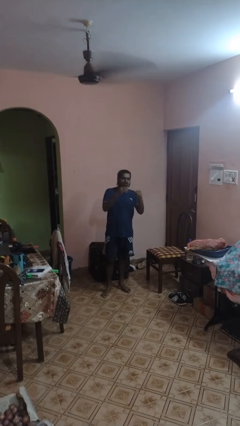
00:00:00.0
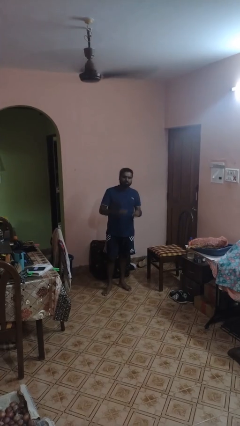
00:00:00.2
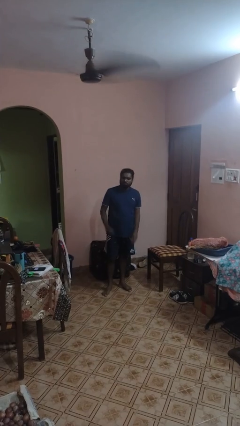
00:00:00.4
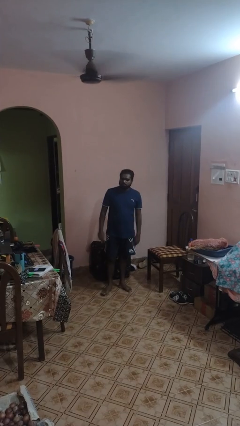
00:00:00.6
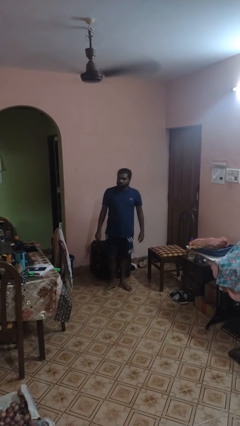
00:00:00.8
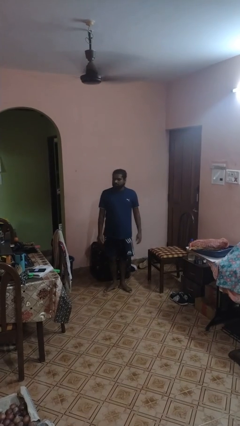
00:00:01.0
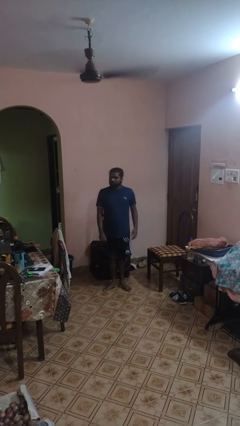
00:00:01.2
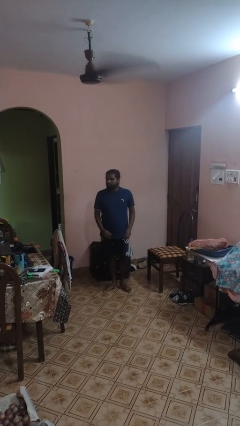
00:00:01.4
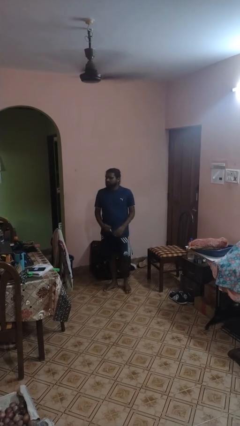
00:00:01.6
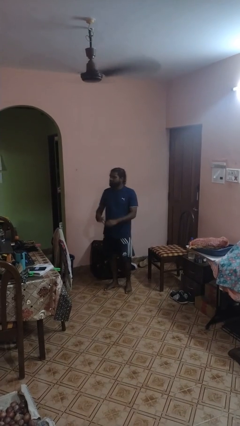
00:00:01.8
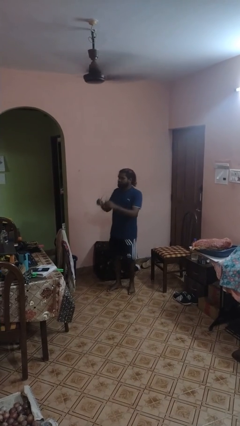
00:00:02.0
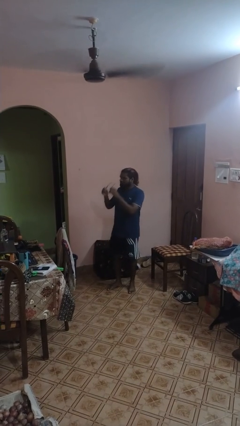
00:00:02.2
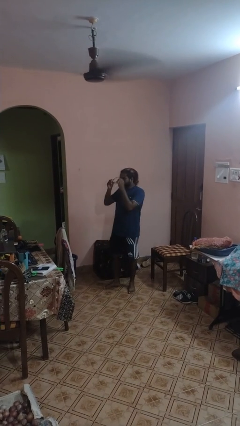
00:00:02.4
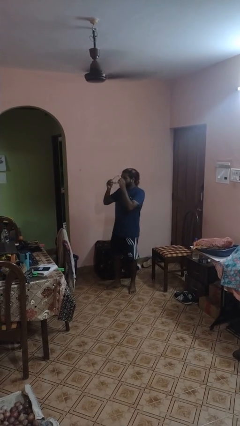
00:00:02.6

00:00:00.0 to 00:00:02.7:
person takes off glasses

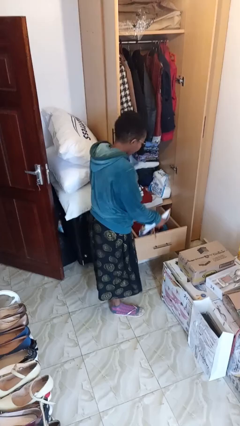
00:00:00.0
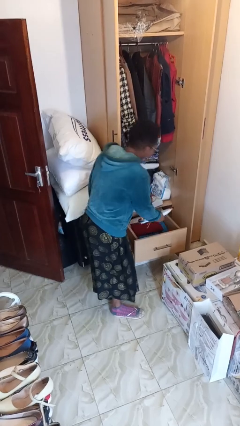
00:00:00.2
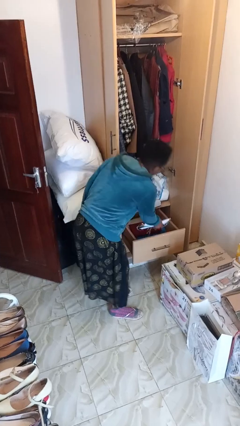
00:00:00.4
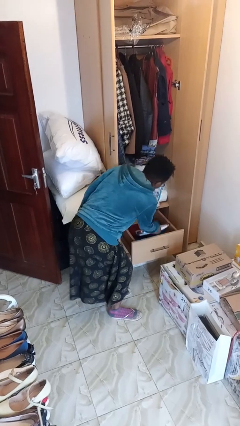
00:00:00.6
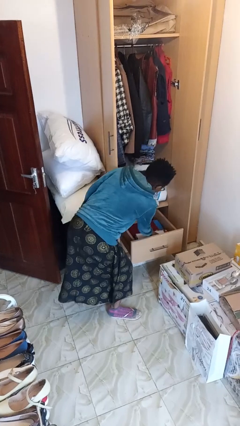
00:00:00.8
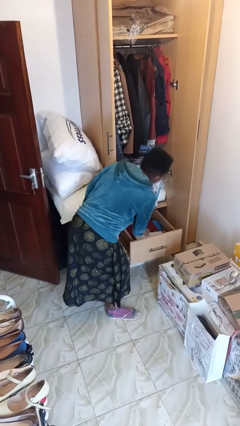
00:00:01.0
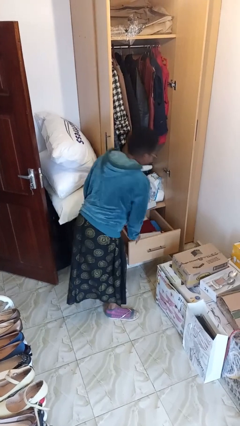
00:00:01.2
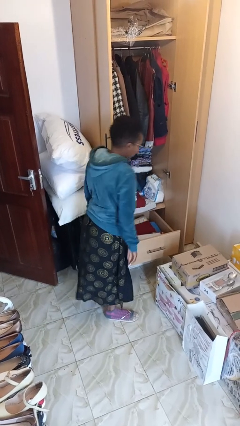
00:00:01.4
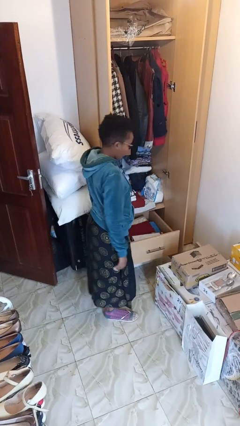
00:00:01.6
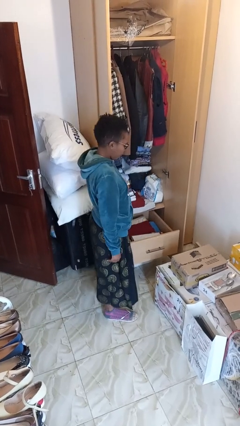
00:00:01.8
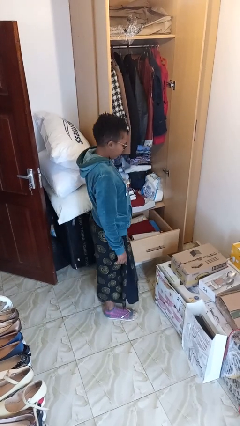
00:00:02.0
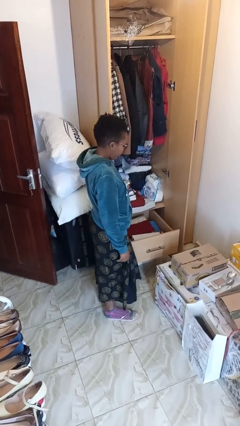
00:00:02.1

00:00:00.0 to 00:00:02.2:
person puts clothes into dresser

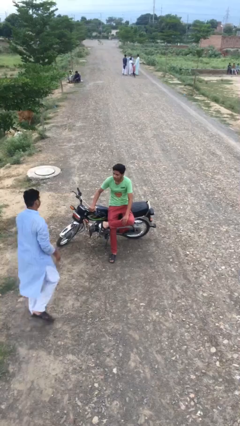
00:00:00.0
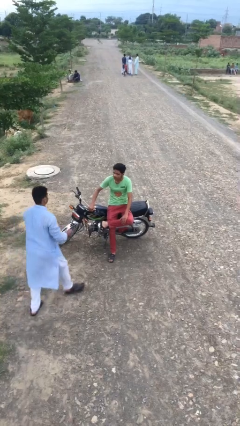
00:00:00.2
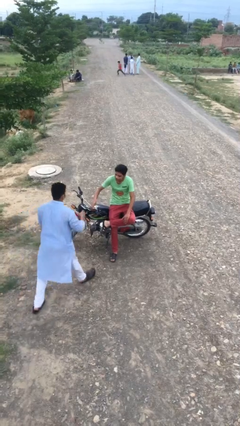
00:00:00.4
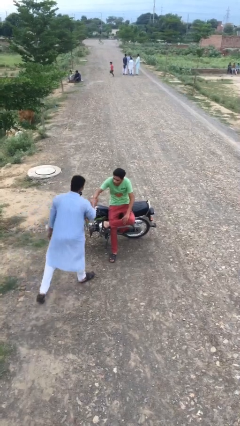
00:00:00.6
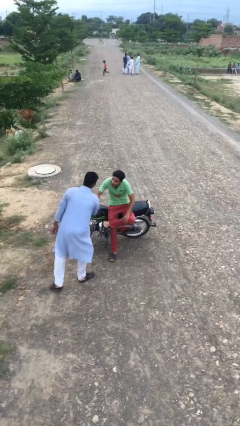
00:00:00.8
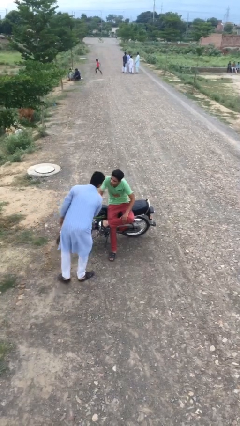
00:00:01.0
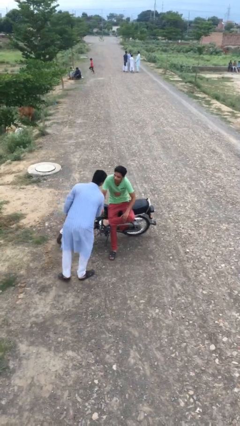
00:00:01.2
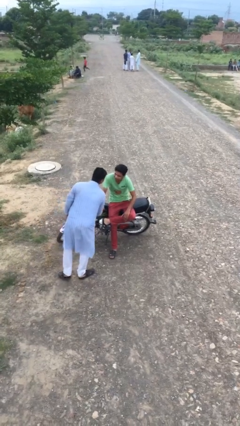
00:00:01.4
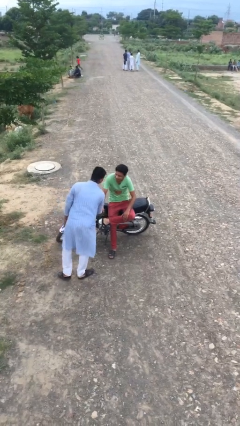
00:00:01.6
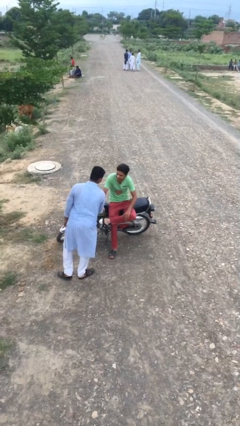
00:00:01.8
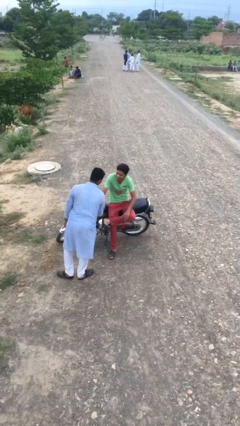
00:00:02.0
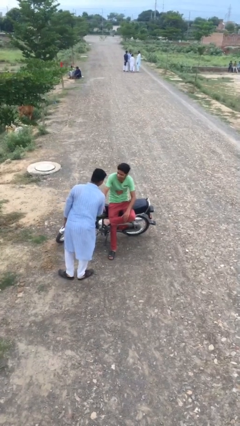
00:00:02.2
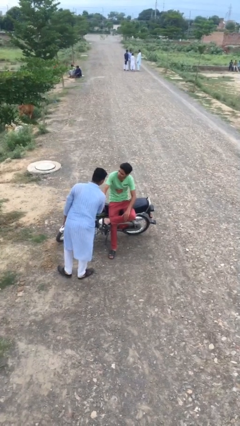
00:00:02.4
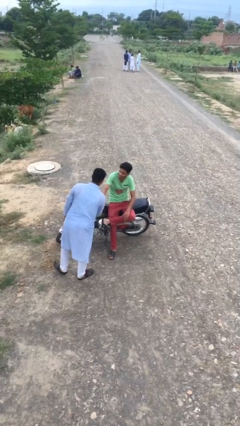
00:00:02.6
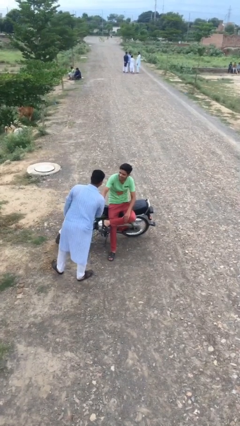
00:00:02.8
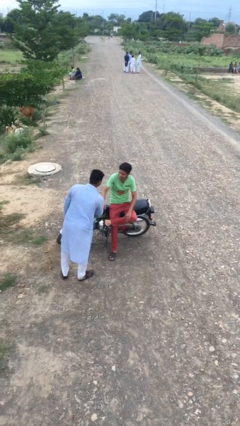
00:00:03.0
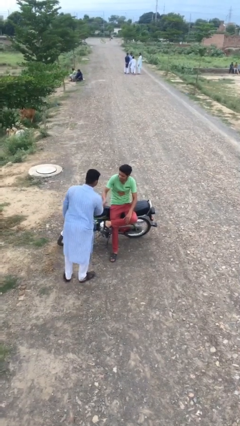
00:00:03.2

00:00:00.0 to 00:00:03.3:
person shakes hand

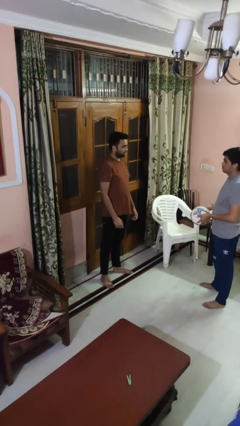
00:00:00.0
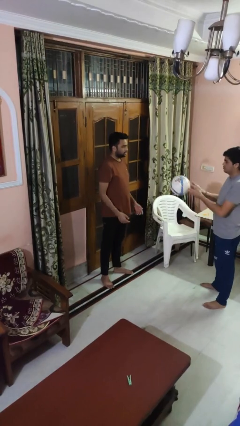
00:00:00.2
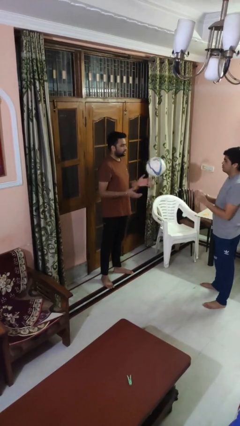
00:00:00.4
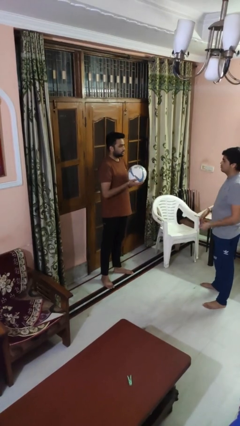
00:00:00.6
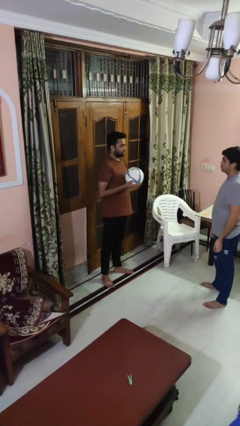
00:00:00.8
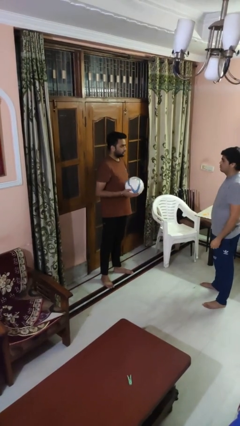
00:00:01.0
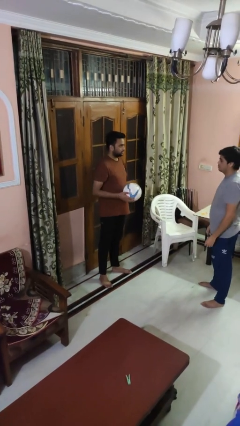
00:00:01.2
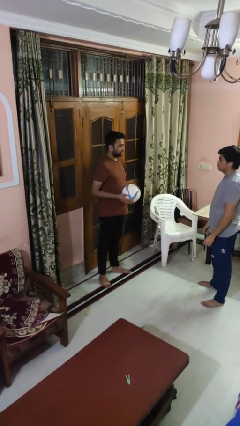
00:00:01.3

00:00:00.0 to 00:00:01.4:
person catches object from person

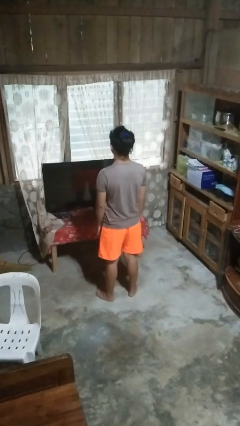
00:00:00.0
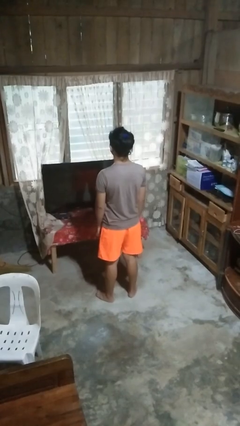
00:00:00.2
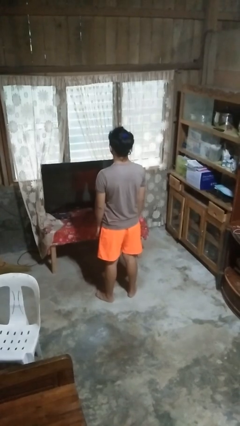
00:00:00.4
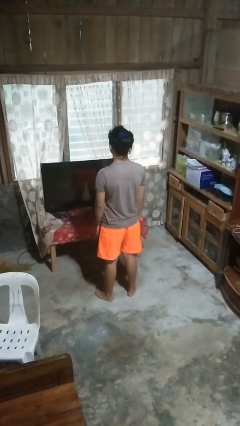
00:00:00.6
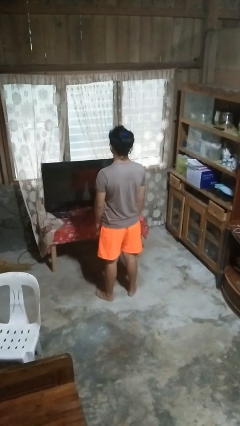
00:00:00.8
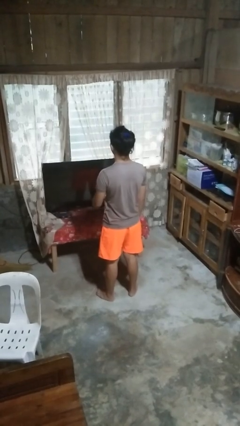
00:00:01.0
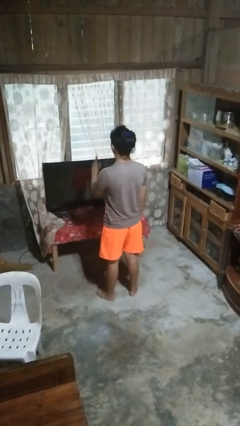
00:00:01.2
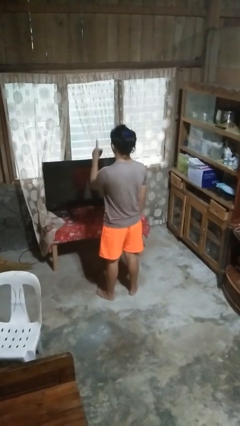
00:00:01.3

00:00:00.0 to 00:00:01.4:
person gestures number one

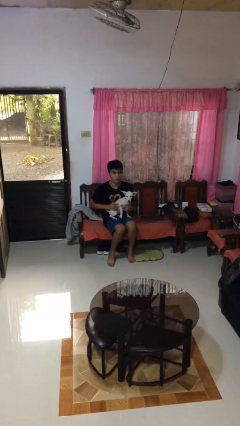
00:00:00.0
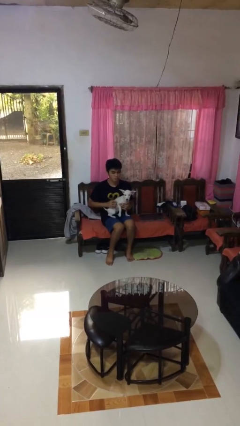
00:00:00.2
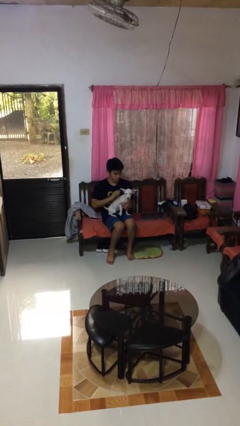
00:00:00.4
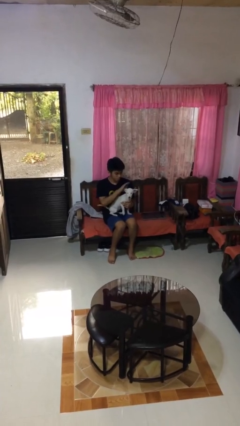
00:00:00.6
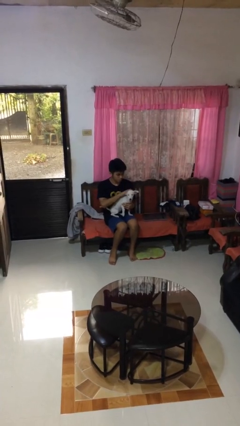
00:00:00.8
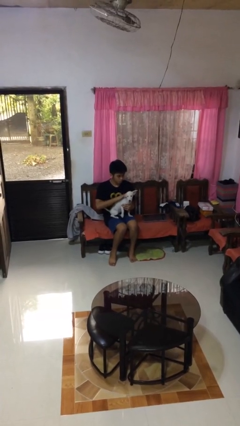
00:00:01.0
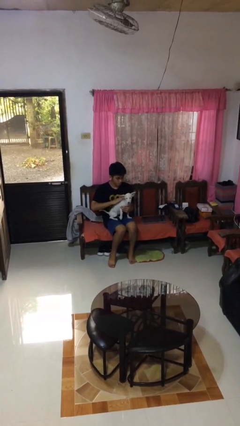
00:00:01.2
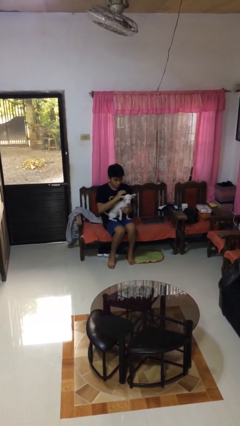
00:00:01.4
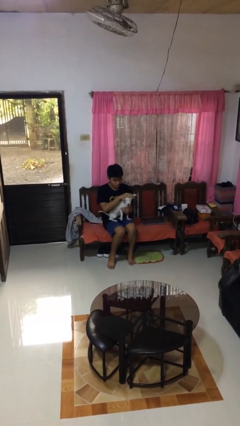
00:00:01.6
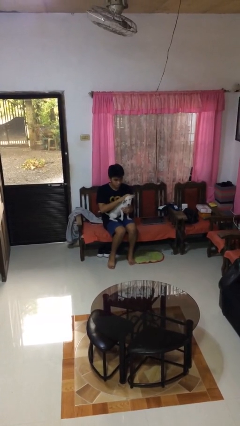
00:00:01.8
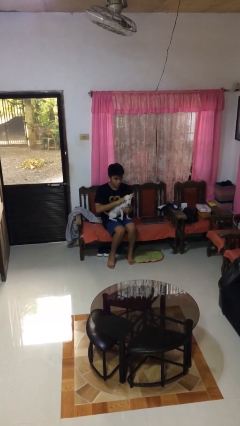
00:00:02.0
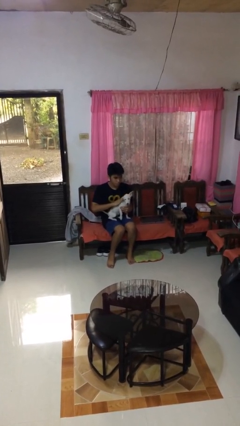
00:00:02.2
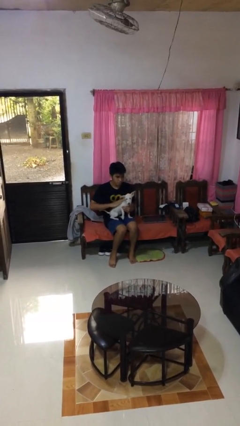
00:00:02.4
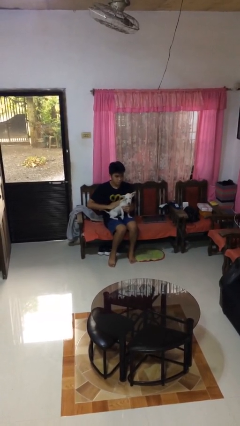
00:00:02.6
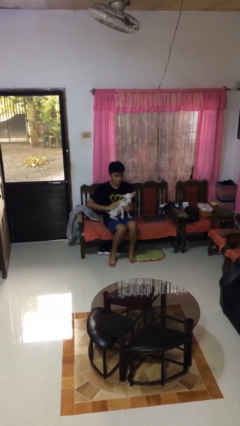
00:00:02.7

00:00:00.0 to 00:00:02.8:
person pets dog

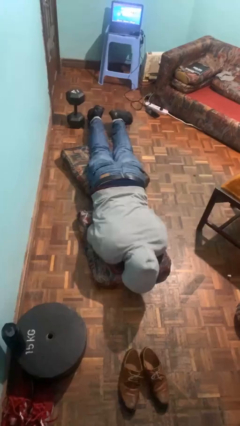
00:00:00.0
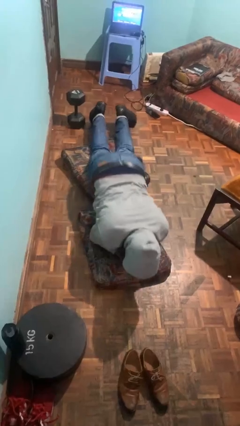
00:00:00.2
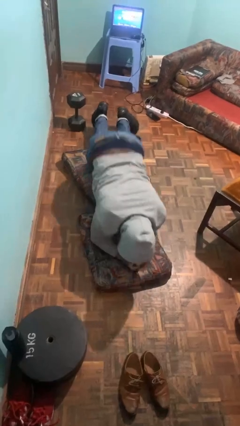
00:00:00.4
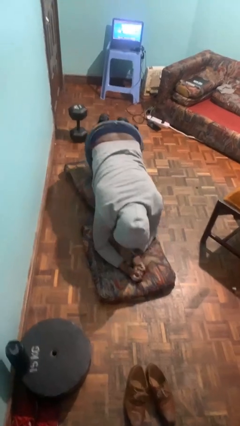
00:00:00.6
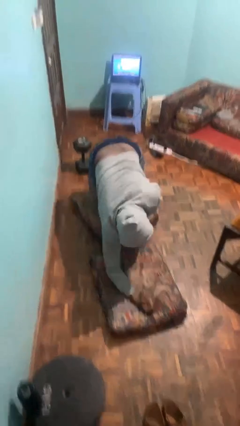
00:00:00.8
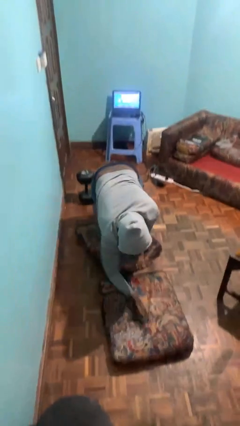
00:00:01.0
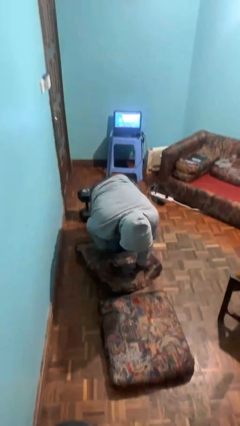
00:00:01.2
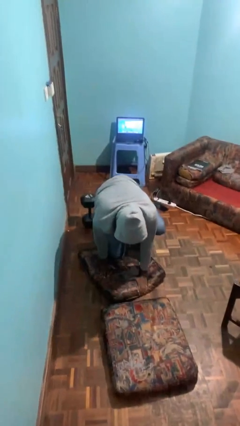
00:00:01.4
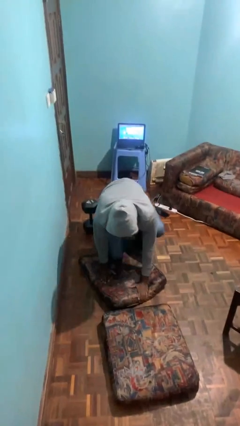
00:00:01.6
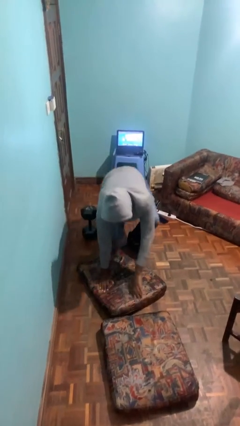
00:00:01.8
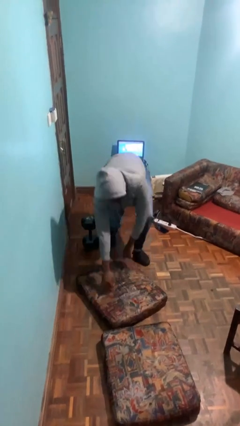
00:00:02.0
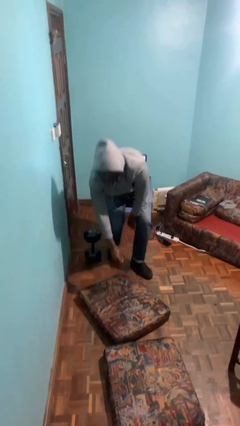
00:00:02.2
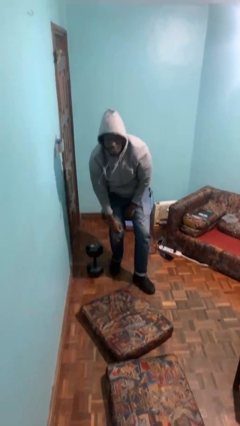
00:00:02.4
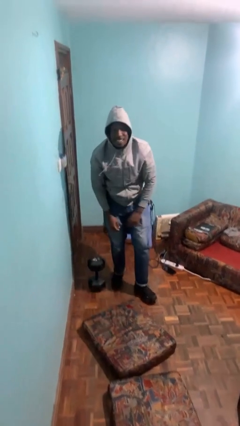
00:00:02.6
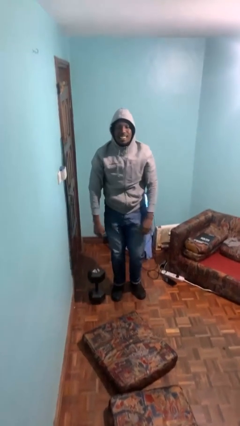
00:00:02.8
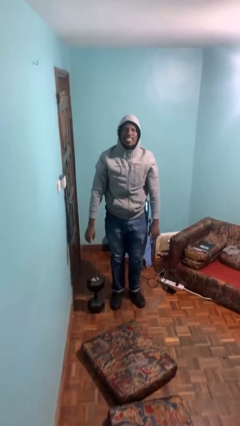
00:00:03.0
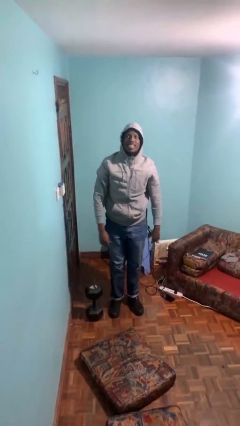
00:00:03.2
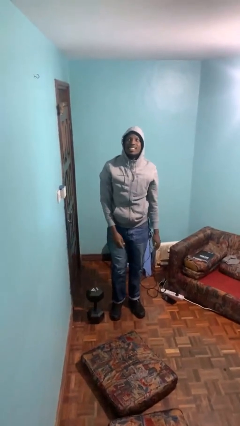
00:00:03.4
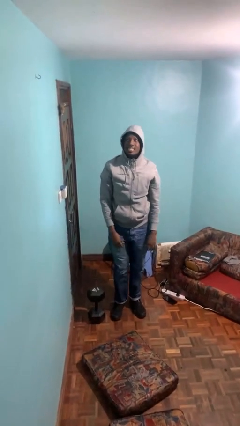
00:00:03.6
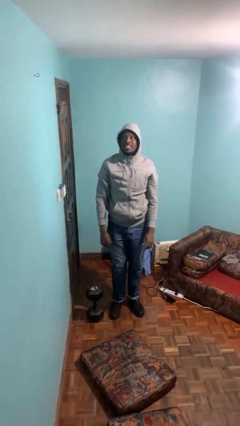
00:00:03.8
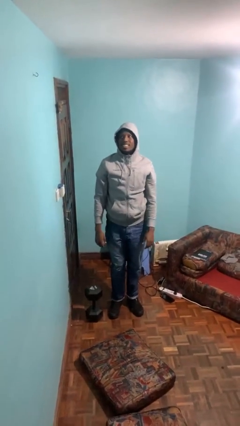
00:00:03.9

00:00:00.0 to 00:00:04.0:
person stands up from floor
